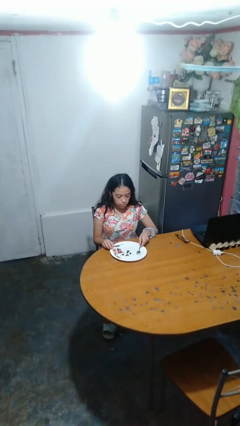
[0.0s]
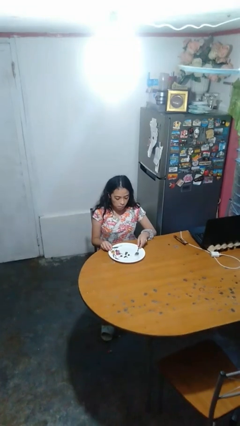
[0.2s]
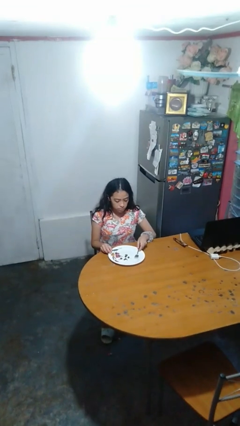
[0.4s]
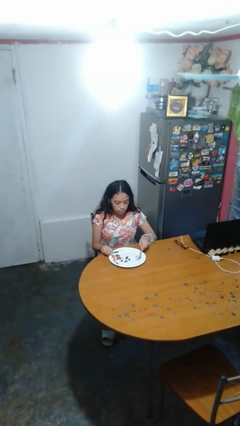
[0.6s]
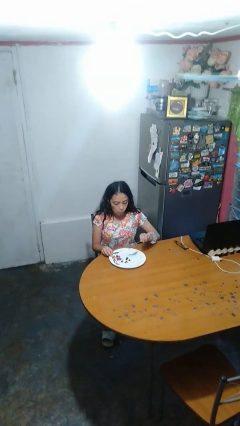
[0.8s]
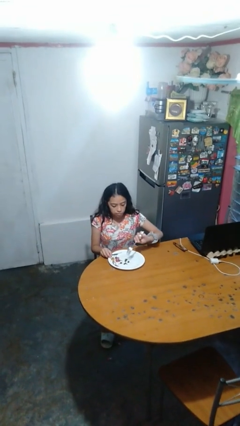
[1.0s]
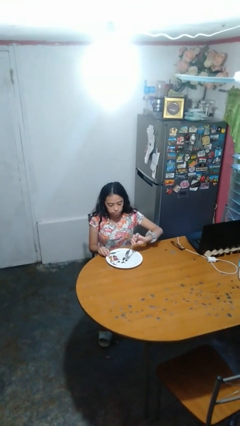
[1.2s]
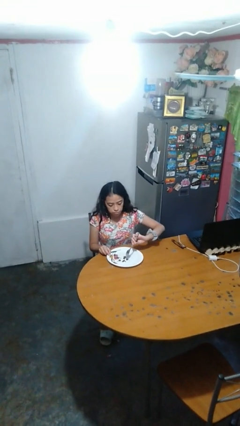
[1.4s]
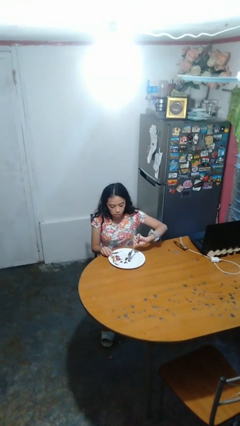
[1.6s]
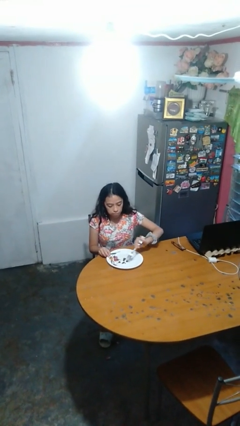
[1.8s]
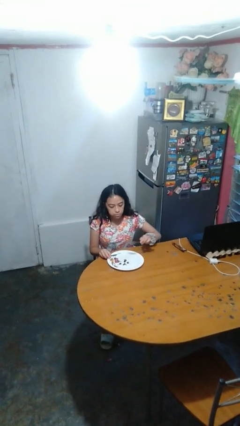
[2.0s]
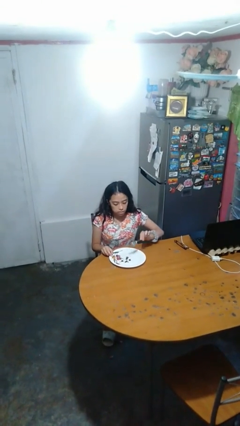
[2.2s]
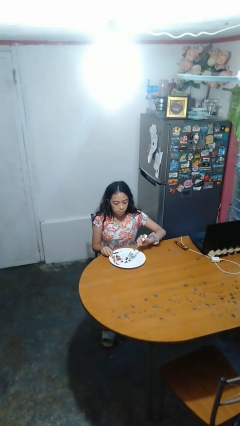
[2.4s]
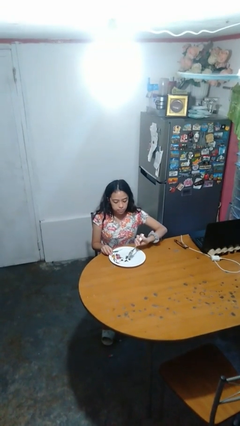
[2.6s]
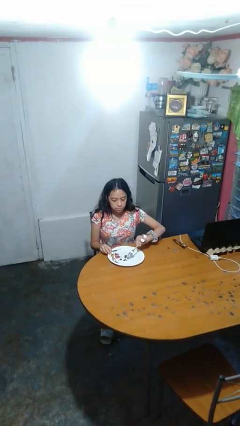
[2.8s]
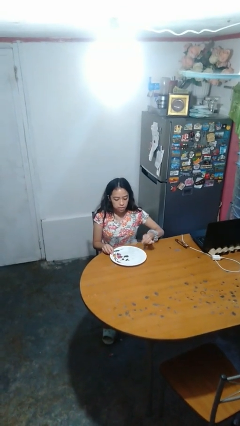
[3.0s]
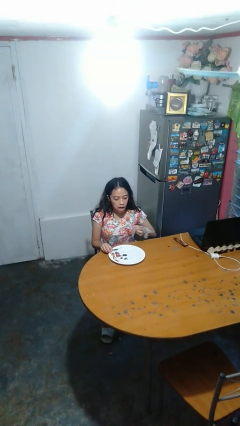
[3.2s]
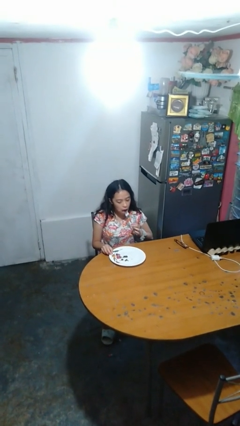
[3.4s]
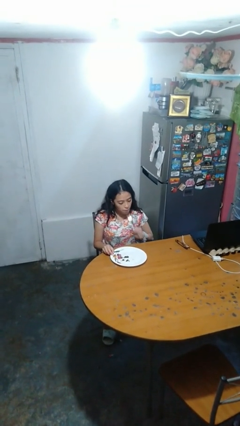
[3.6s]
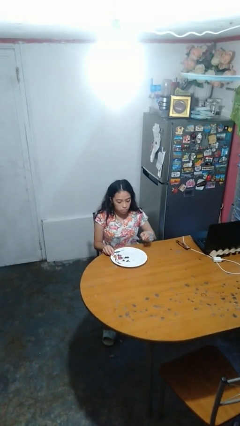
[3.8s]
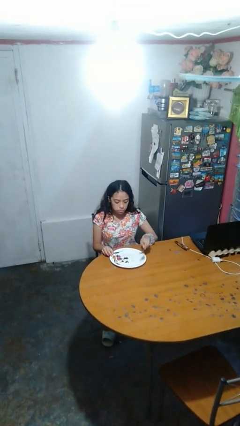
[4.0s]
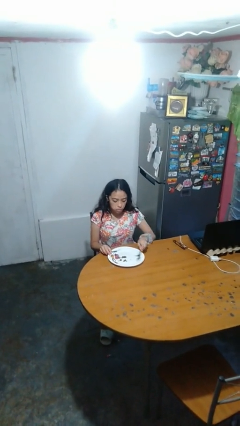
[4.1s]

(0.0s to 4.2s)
person eats with utensil

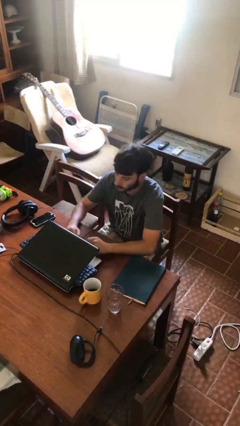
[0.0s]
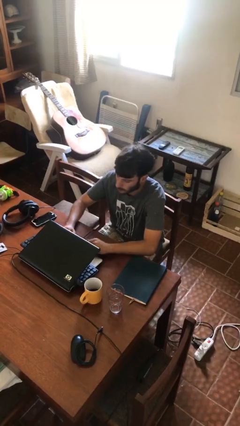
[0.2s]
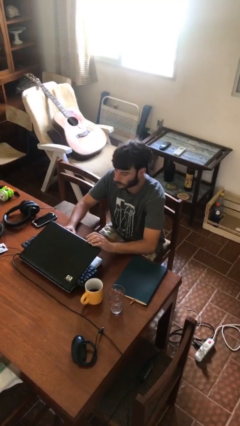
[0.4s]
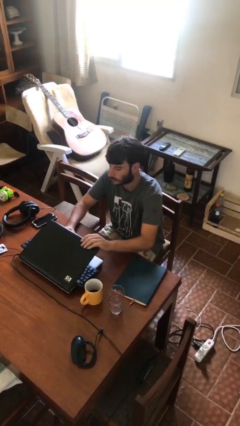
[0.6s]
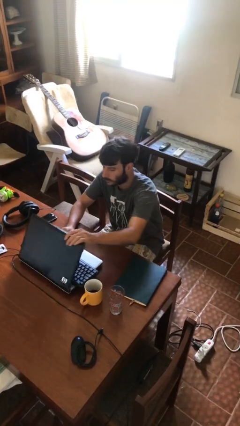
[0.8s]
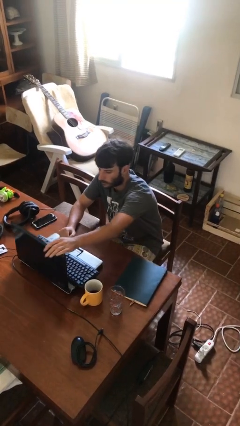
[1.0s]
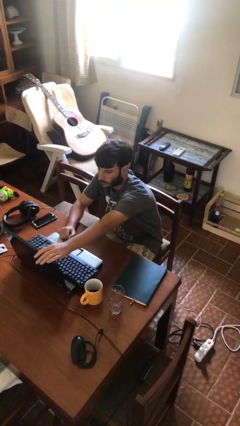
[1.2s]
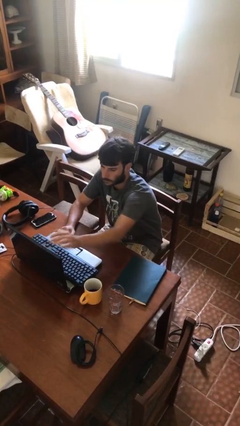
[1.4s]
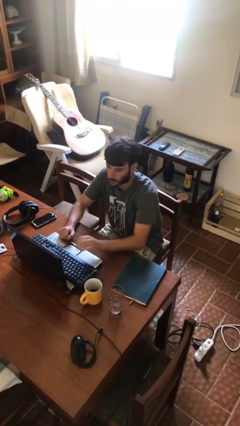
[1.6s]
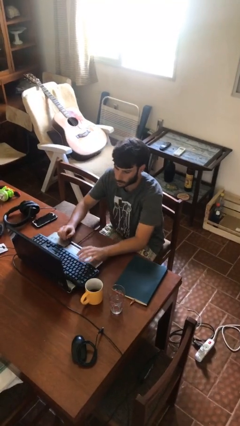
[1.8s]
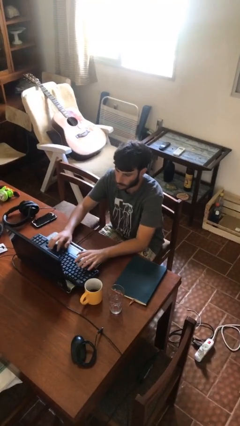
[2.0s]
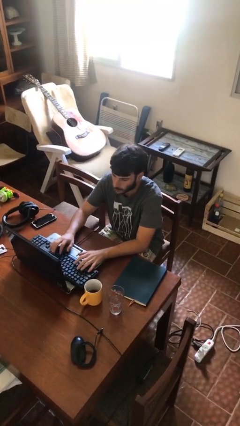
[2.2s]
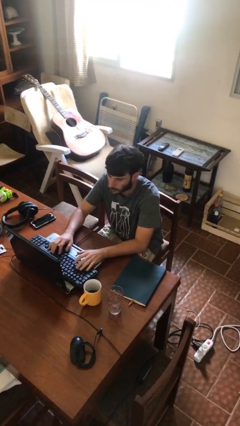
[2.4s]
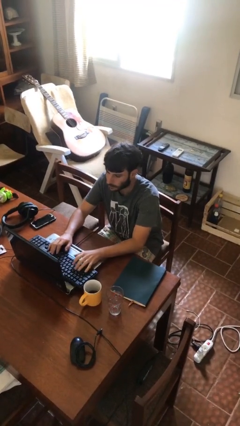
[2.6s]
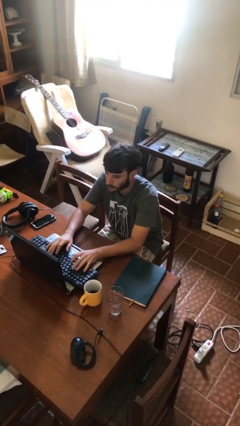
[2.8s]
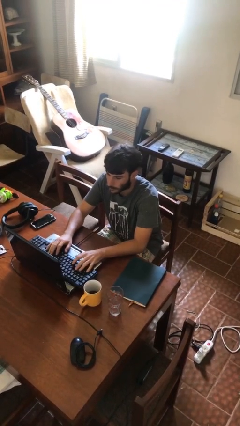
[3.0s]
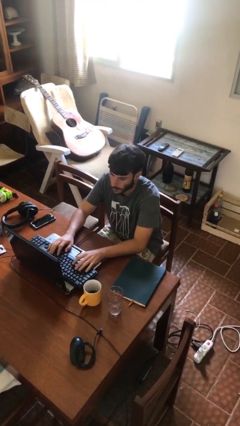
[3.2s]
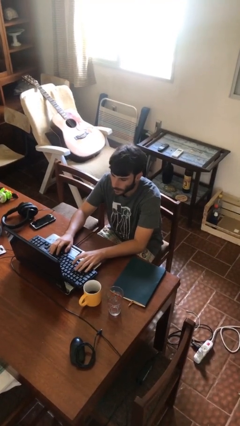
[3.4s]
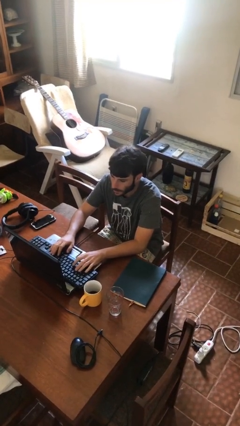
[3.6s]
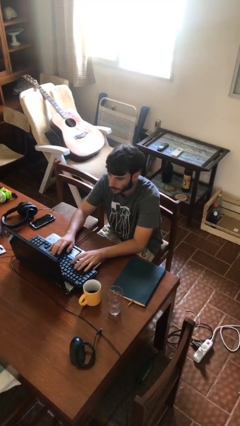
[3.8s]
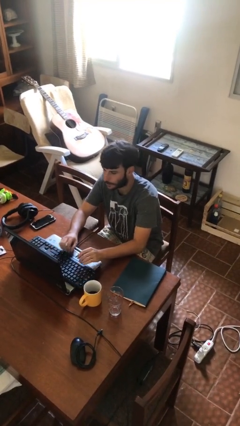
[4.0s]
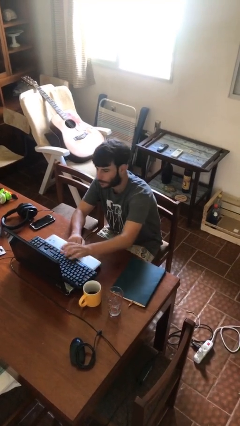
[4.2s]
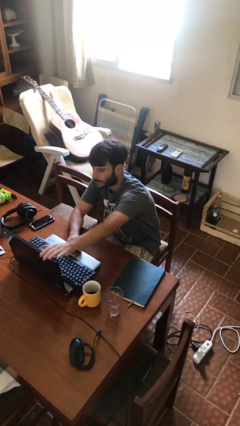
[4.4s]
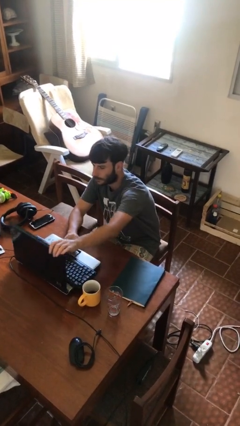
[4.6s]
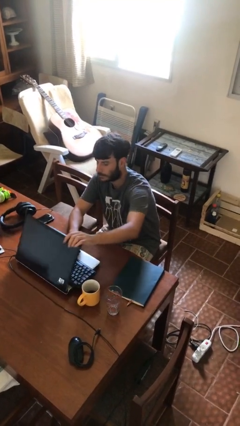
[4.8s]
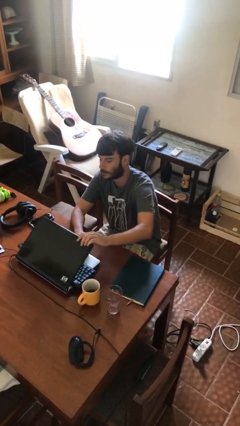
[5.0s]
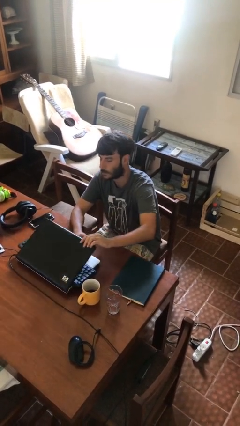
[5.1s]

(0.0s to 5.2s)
person interacts with laptop

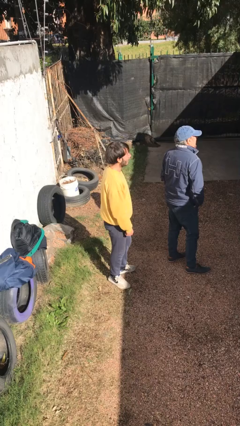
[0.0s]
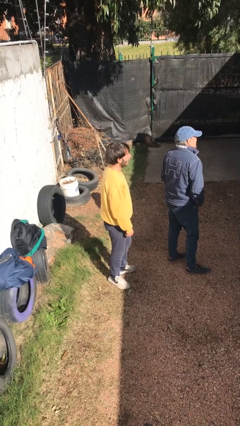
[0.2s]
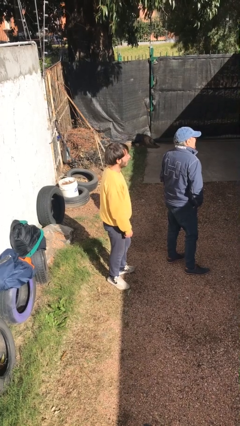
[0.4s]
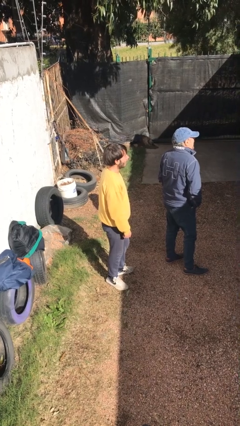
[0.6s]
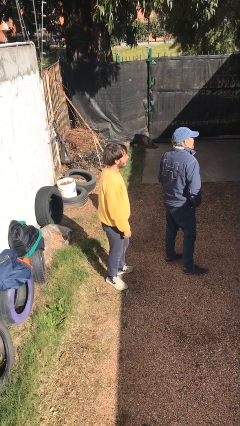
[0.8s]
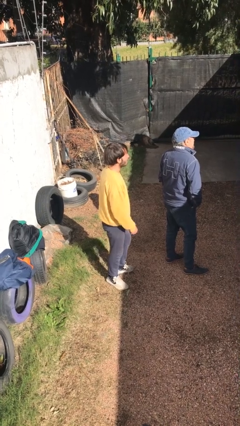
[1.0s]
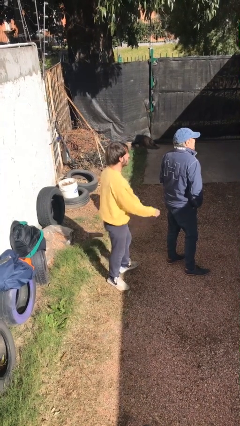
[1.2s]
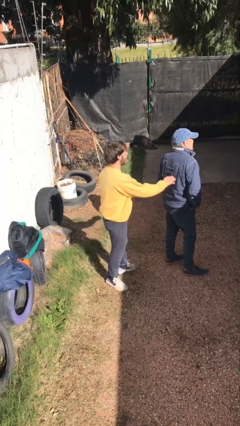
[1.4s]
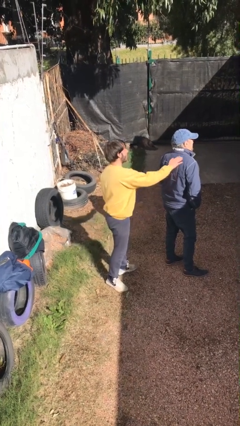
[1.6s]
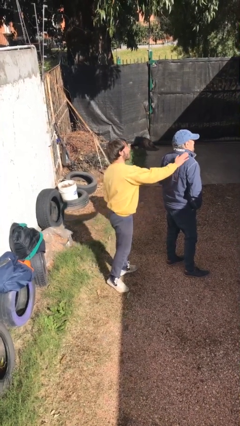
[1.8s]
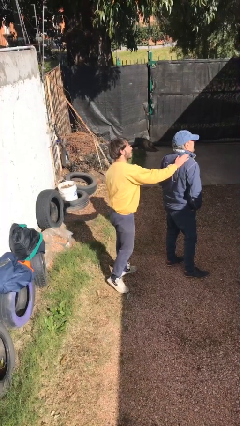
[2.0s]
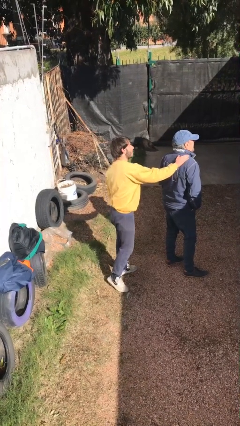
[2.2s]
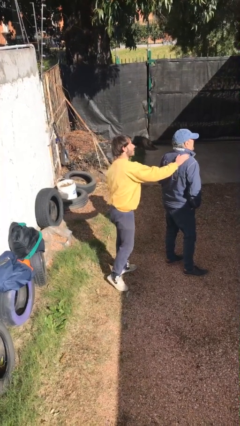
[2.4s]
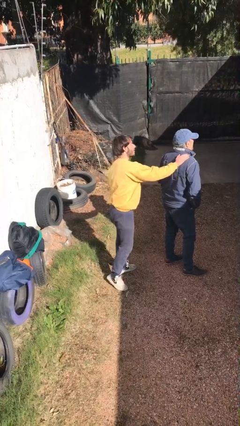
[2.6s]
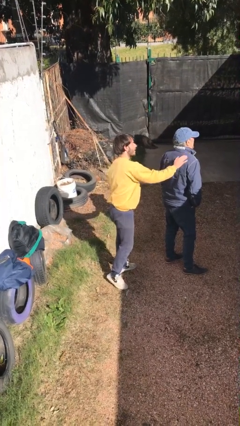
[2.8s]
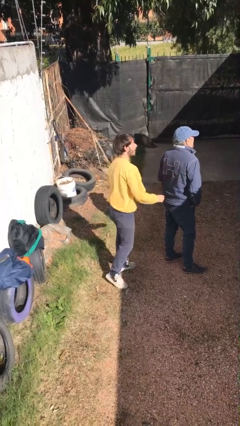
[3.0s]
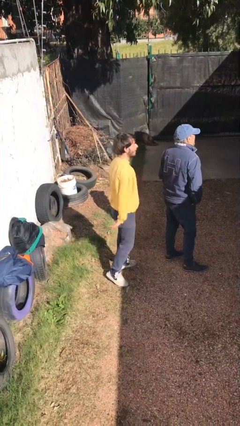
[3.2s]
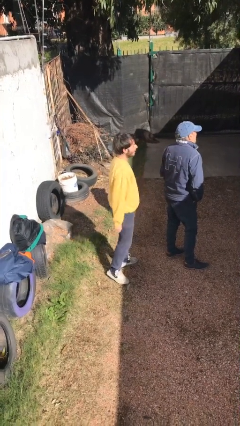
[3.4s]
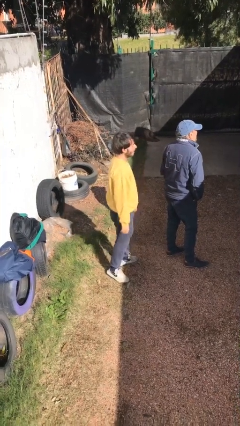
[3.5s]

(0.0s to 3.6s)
person touches back of person

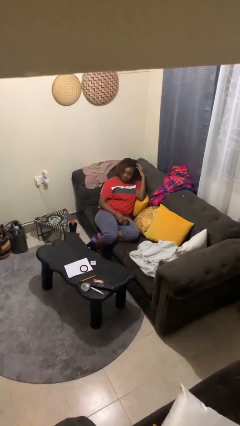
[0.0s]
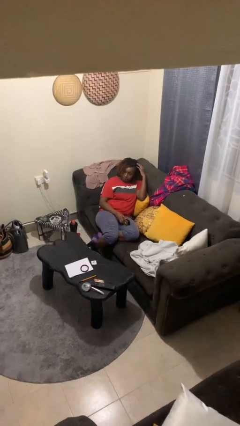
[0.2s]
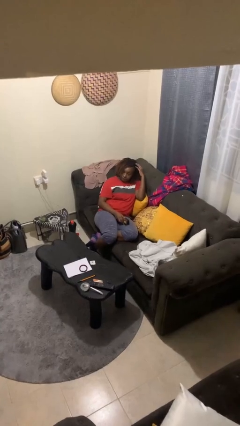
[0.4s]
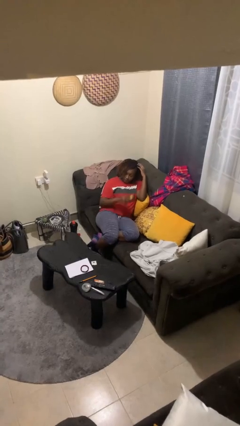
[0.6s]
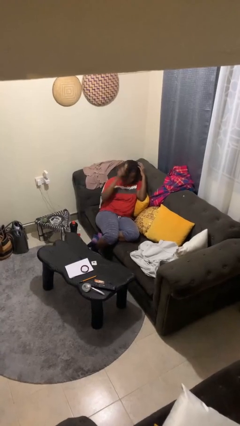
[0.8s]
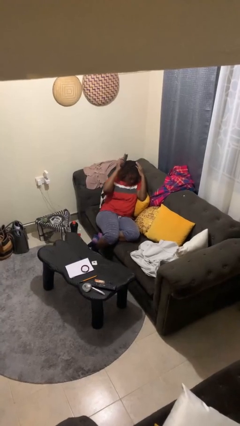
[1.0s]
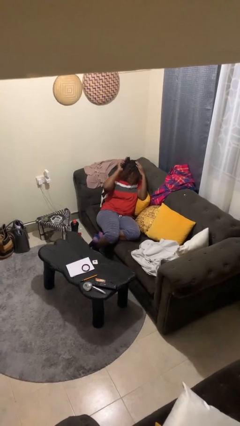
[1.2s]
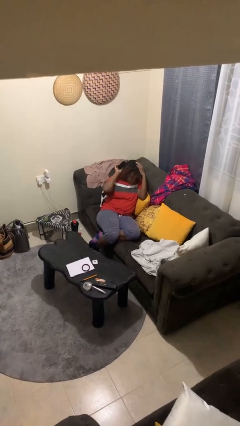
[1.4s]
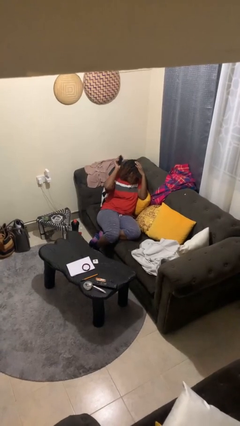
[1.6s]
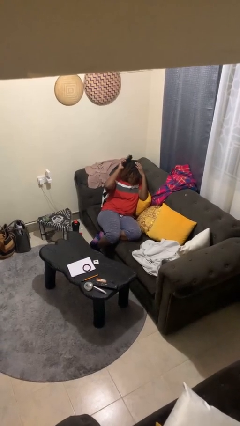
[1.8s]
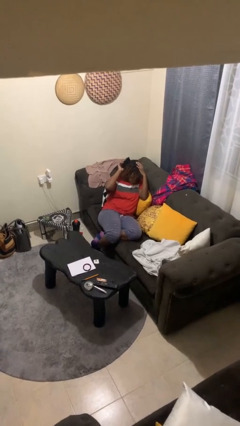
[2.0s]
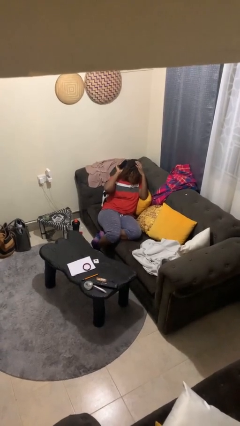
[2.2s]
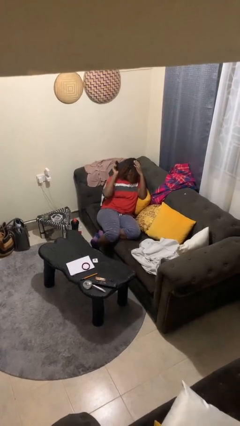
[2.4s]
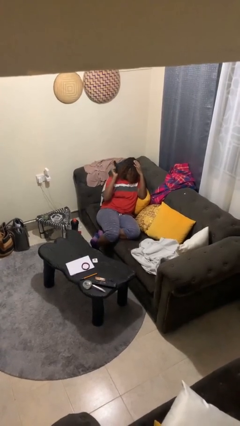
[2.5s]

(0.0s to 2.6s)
person brushes hair

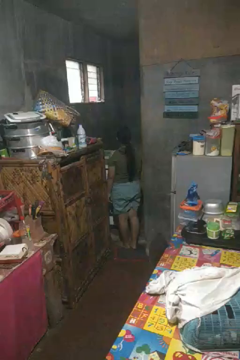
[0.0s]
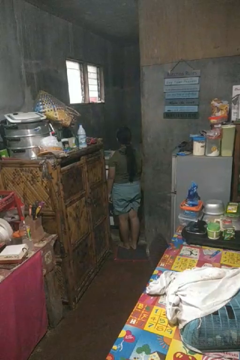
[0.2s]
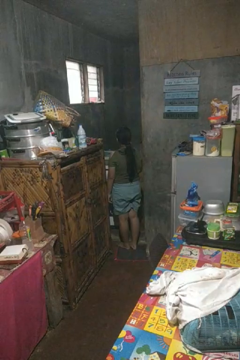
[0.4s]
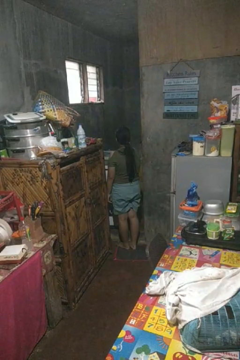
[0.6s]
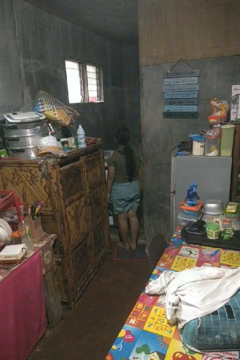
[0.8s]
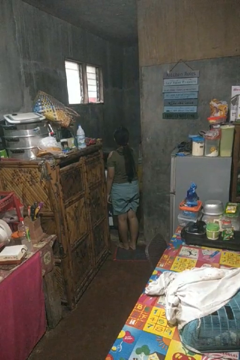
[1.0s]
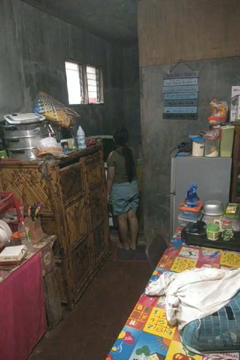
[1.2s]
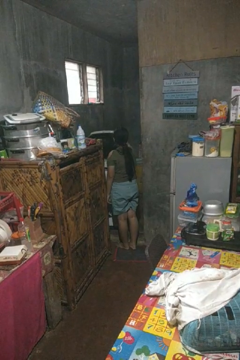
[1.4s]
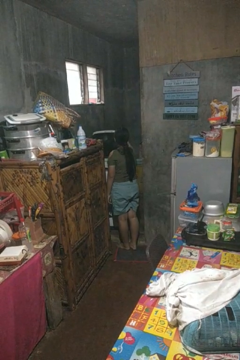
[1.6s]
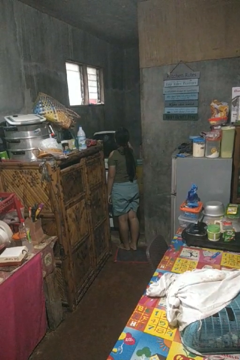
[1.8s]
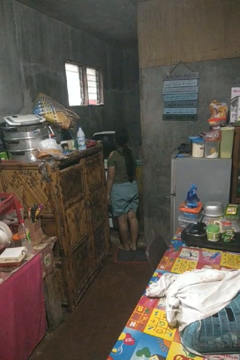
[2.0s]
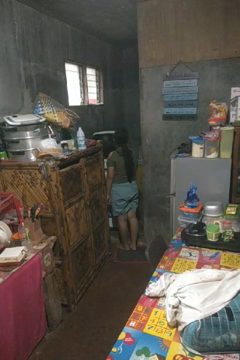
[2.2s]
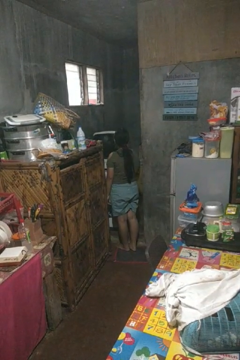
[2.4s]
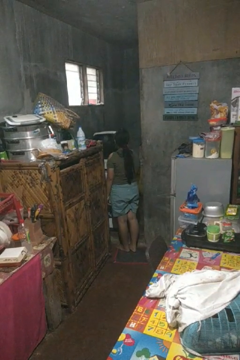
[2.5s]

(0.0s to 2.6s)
person opens clothes washer
